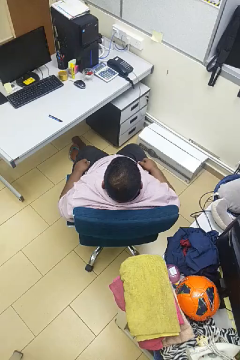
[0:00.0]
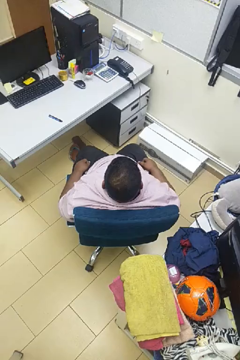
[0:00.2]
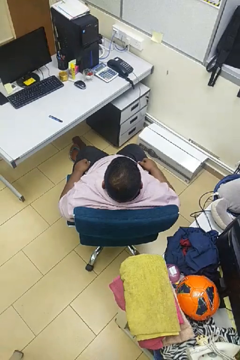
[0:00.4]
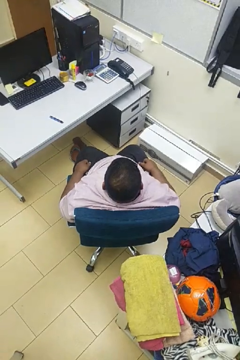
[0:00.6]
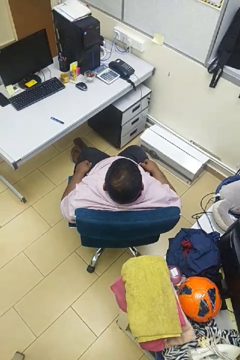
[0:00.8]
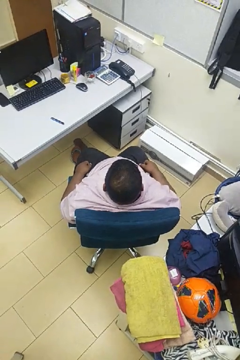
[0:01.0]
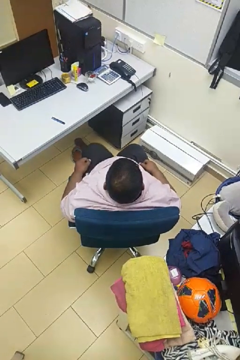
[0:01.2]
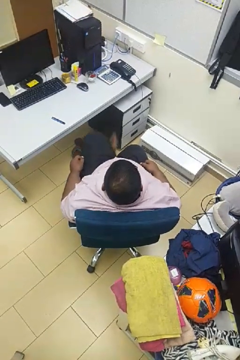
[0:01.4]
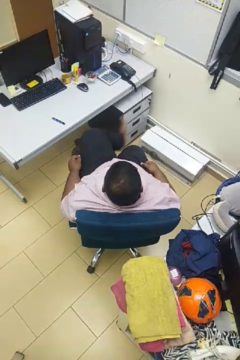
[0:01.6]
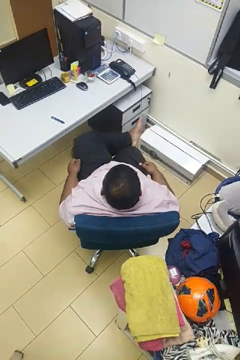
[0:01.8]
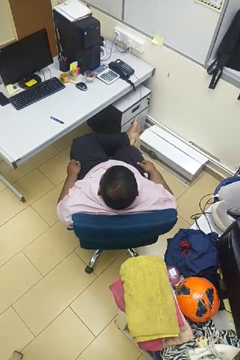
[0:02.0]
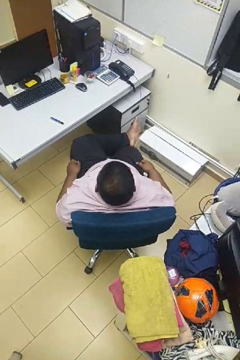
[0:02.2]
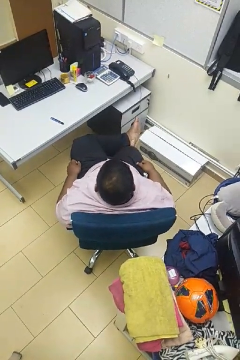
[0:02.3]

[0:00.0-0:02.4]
person crosses legs

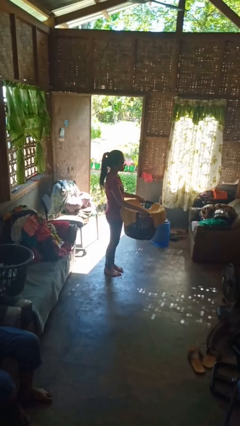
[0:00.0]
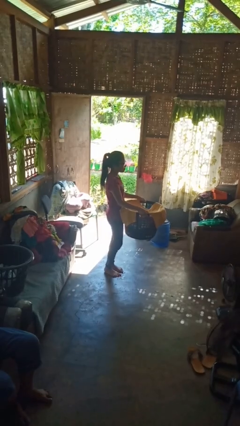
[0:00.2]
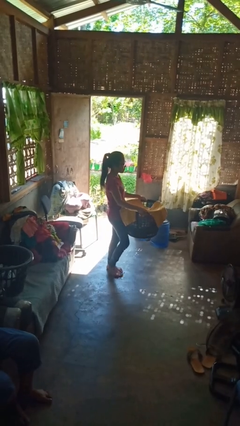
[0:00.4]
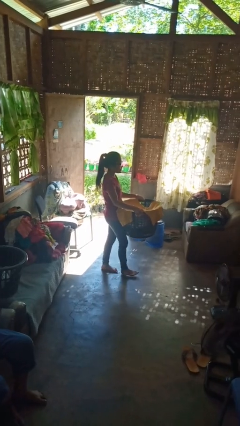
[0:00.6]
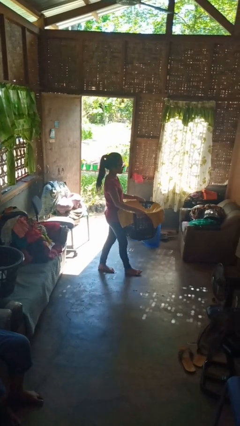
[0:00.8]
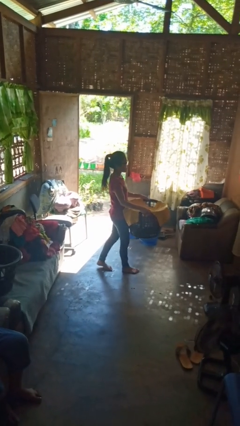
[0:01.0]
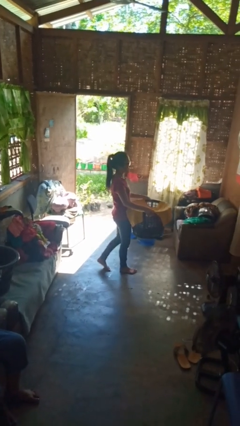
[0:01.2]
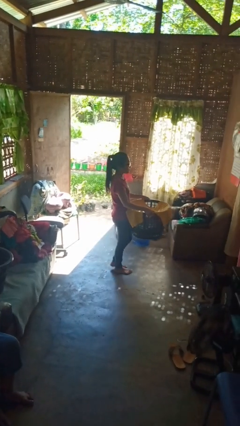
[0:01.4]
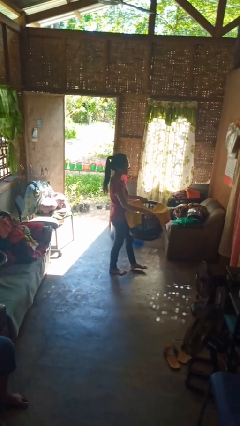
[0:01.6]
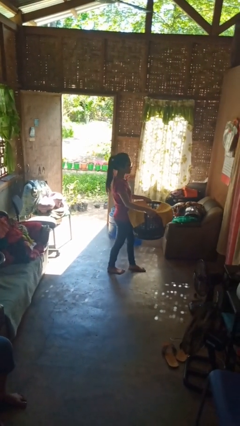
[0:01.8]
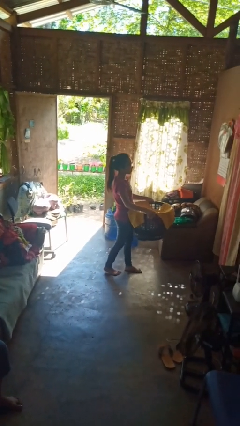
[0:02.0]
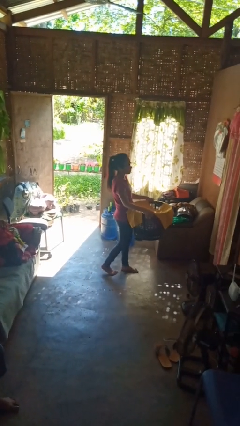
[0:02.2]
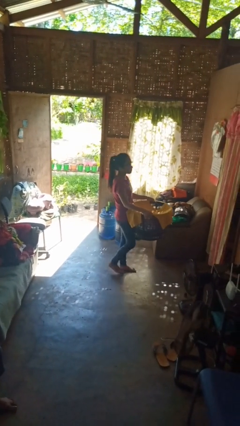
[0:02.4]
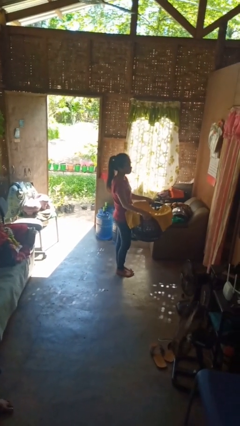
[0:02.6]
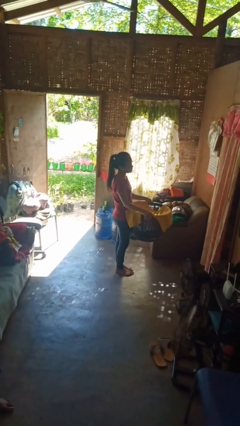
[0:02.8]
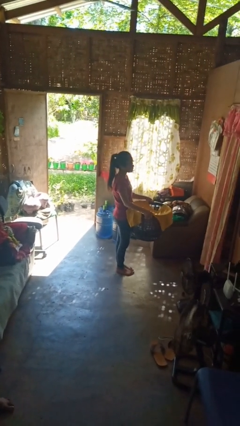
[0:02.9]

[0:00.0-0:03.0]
person carries laundry basket

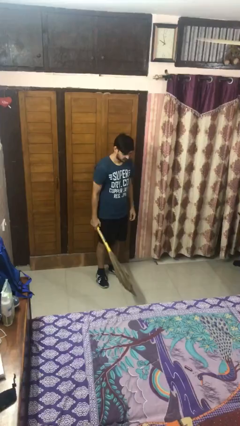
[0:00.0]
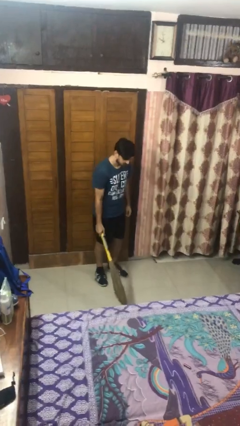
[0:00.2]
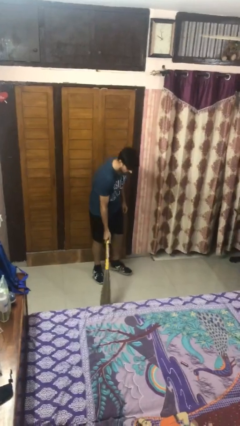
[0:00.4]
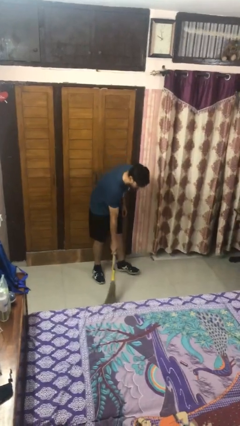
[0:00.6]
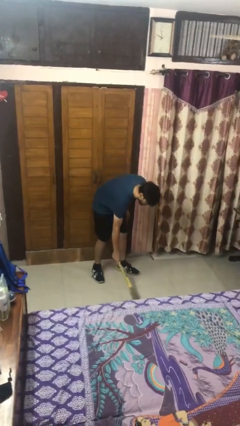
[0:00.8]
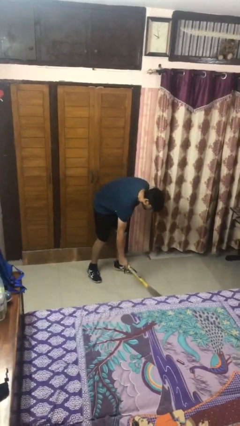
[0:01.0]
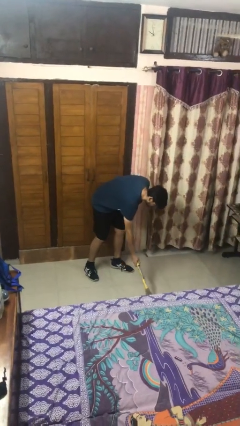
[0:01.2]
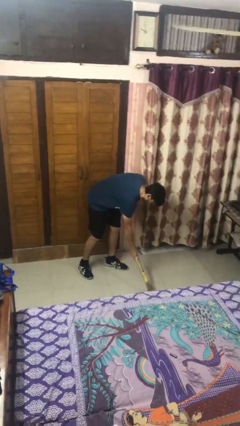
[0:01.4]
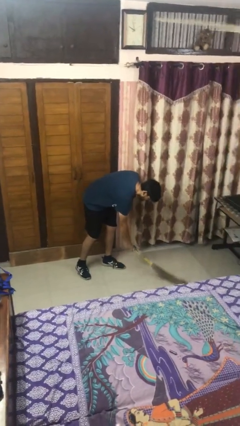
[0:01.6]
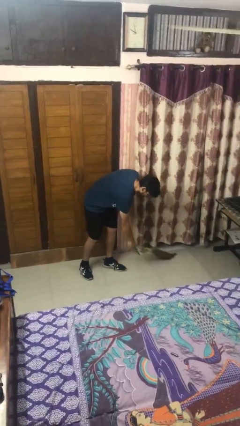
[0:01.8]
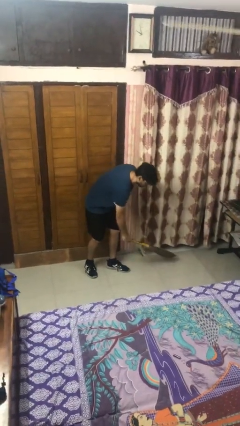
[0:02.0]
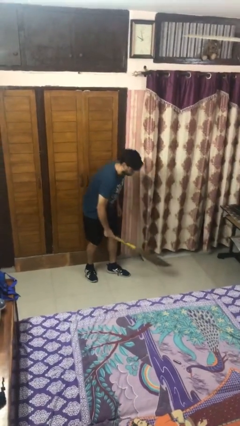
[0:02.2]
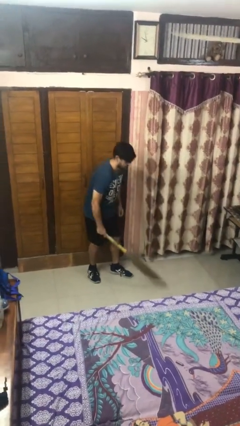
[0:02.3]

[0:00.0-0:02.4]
person sweeps floor

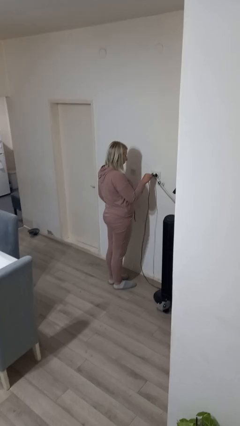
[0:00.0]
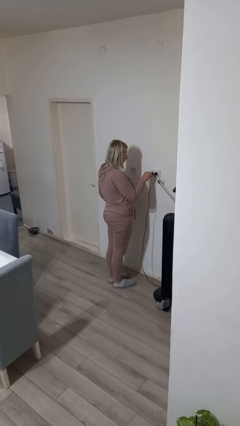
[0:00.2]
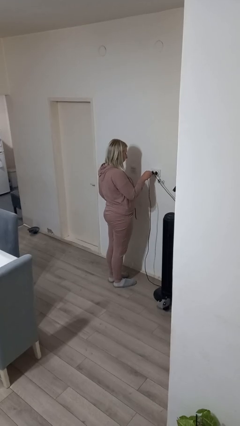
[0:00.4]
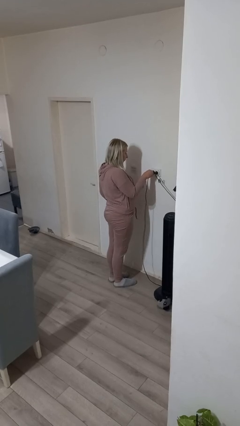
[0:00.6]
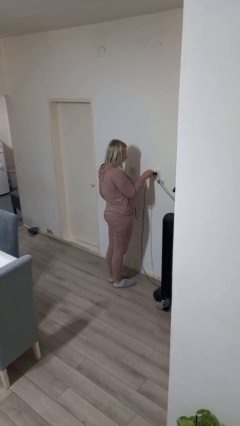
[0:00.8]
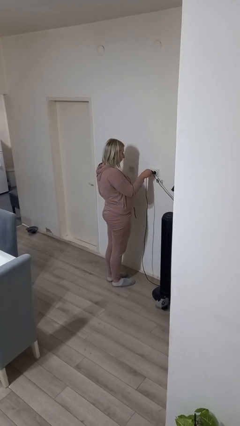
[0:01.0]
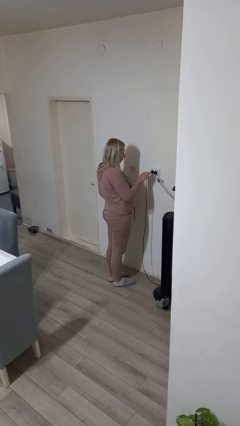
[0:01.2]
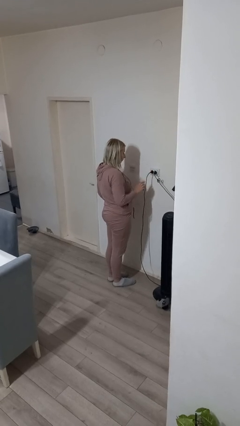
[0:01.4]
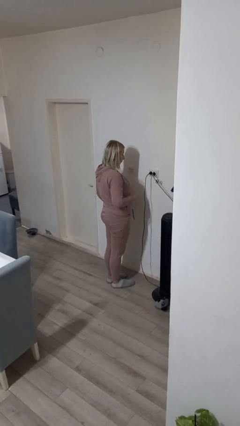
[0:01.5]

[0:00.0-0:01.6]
person plugs into electrical socket

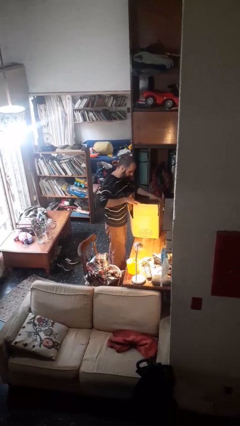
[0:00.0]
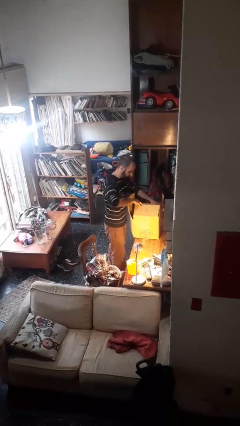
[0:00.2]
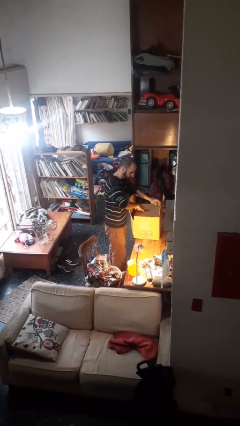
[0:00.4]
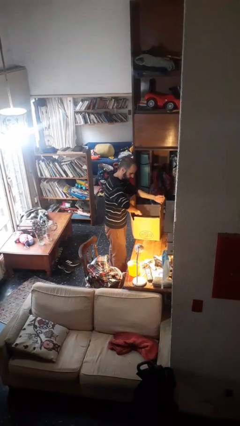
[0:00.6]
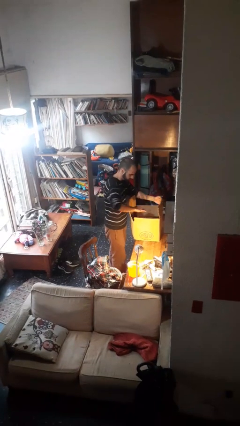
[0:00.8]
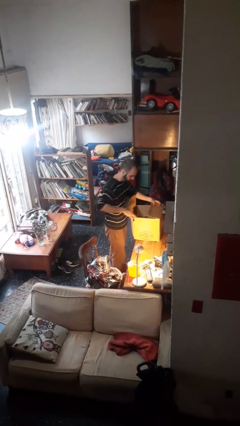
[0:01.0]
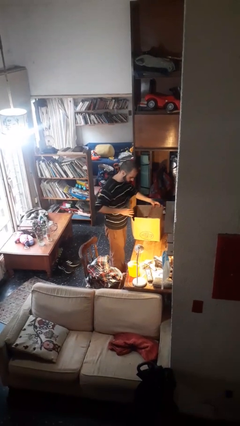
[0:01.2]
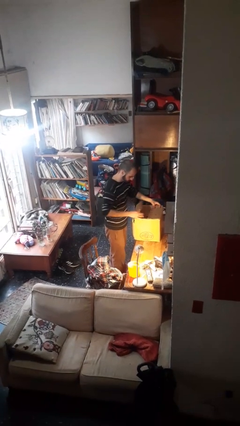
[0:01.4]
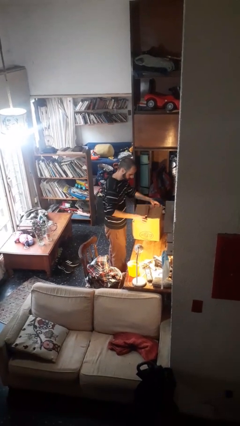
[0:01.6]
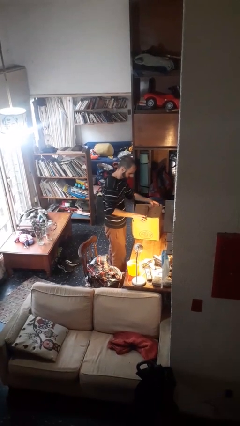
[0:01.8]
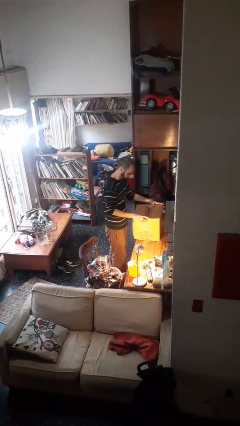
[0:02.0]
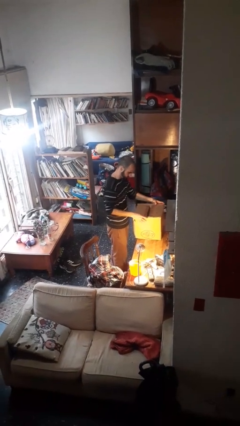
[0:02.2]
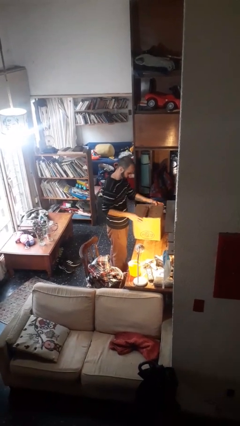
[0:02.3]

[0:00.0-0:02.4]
person closes box

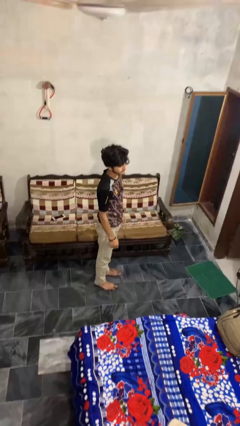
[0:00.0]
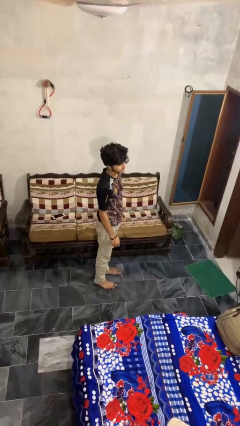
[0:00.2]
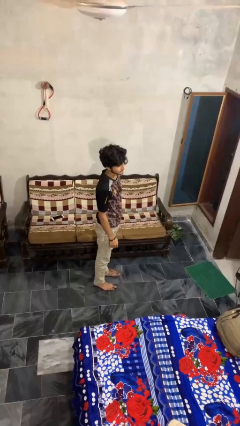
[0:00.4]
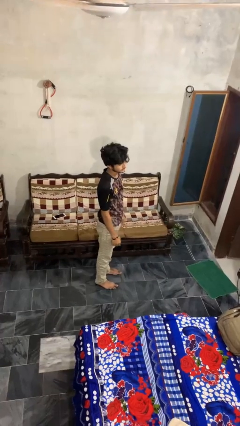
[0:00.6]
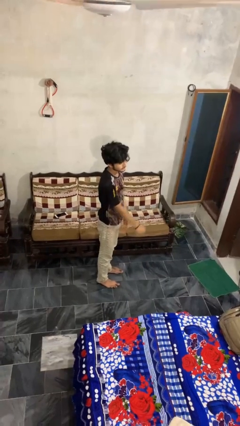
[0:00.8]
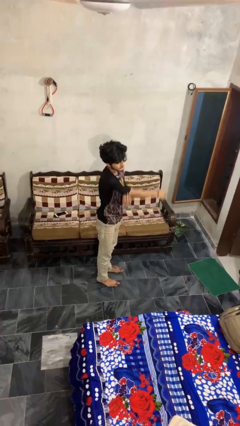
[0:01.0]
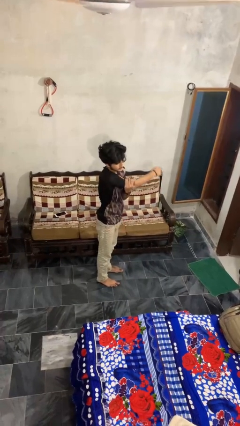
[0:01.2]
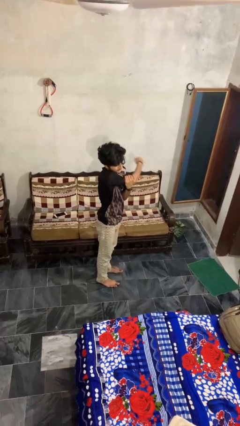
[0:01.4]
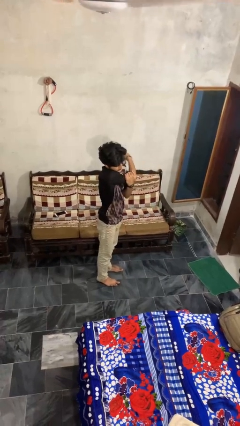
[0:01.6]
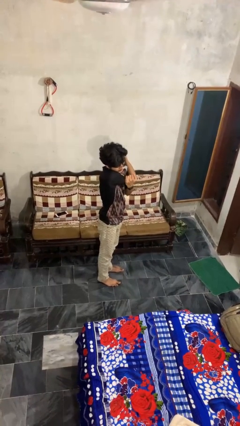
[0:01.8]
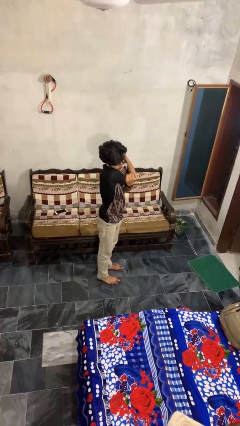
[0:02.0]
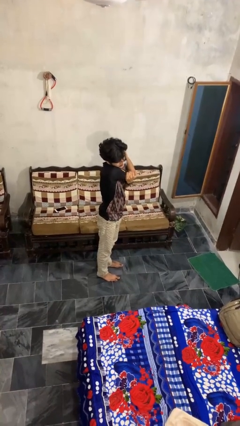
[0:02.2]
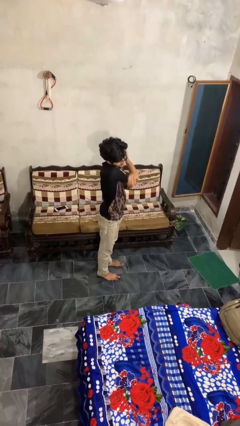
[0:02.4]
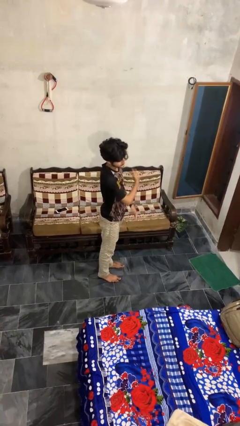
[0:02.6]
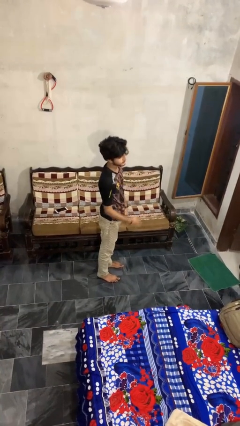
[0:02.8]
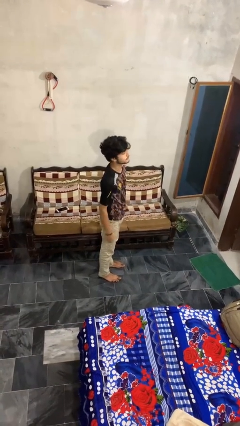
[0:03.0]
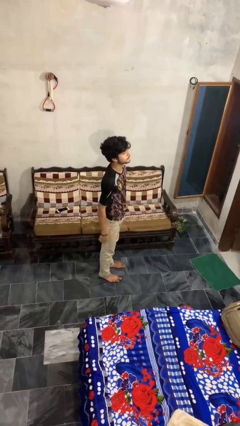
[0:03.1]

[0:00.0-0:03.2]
person stretches arms to side

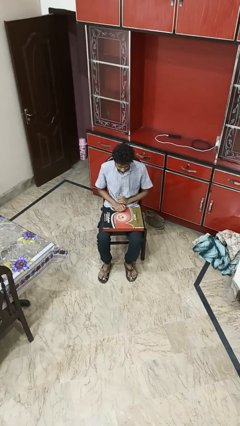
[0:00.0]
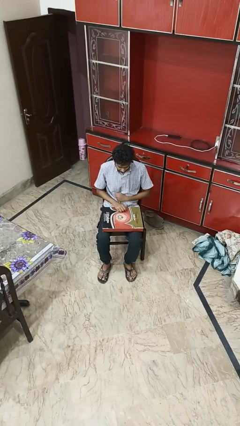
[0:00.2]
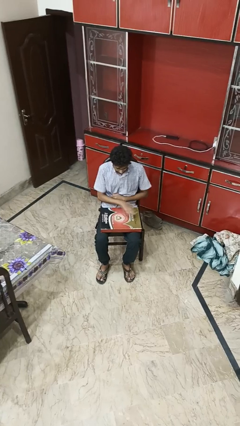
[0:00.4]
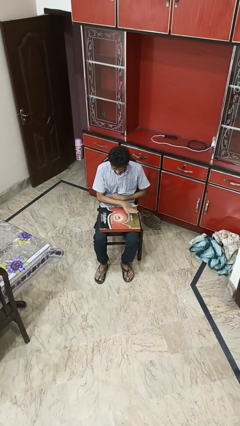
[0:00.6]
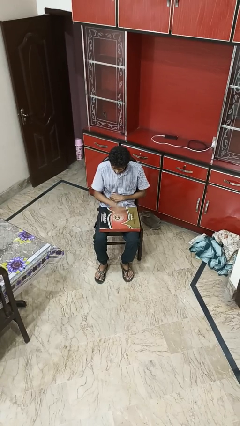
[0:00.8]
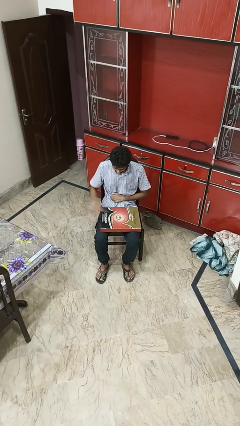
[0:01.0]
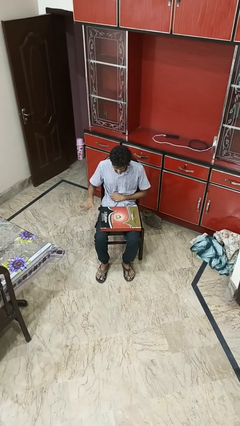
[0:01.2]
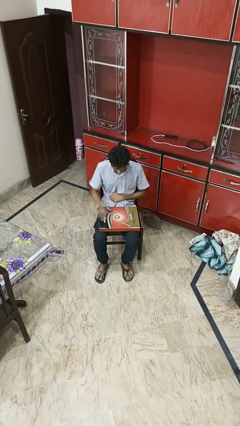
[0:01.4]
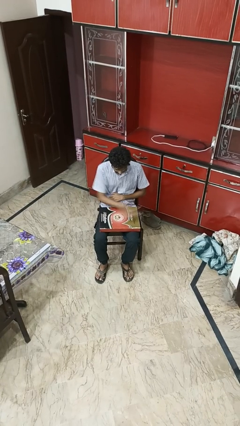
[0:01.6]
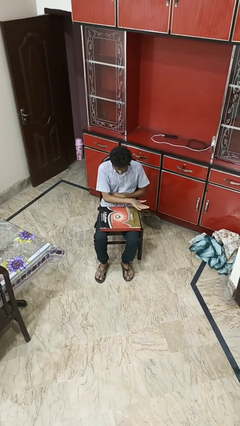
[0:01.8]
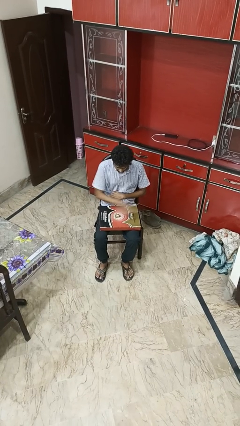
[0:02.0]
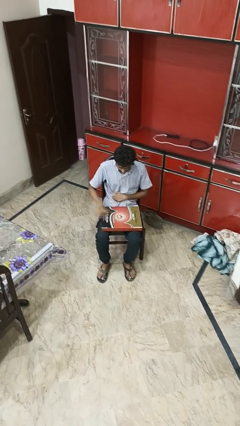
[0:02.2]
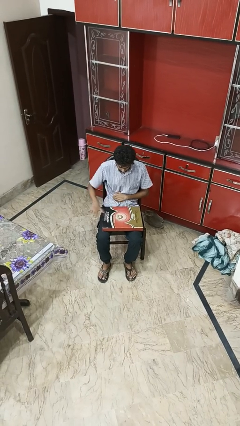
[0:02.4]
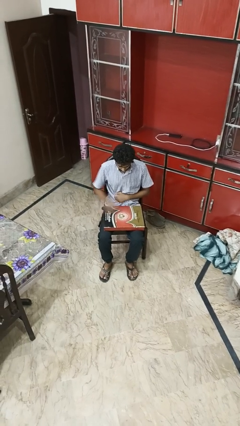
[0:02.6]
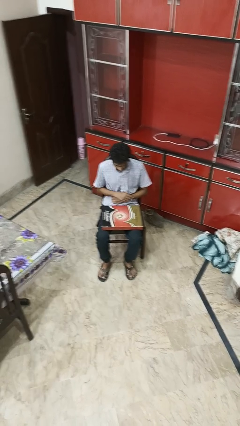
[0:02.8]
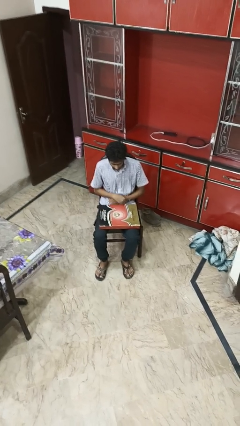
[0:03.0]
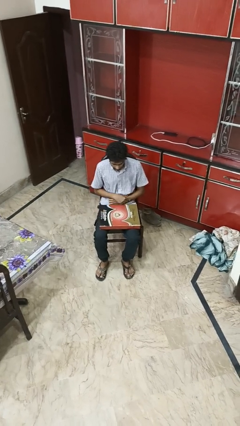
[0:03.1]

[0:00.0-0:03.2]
person waves hand over object
